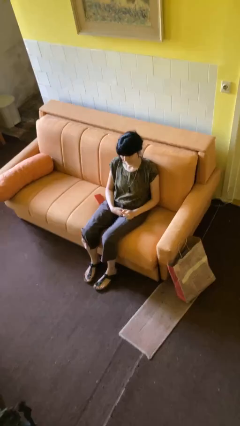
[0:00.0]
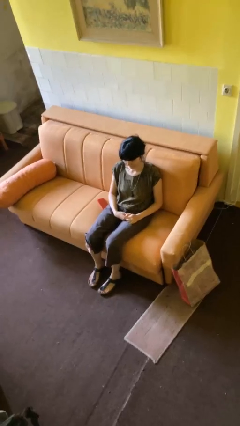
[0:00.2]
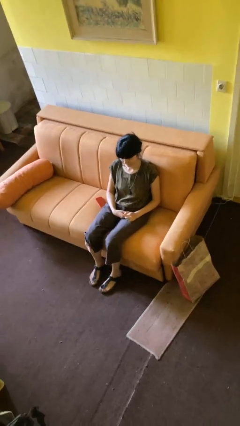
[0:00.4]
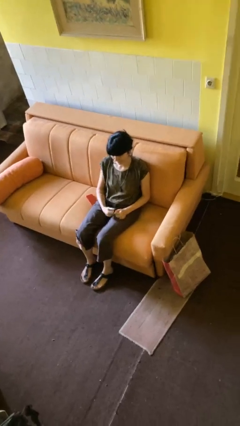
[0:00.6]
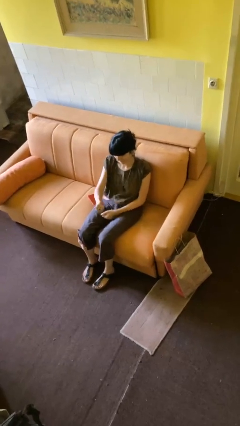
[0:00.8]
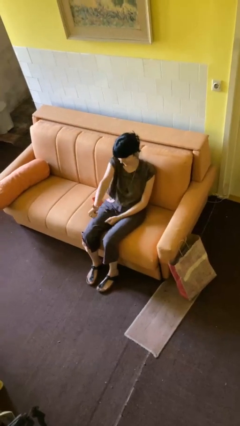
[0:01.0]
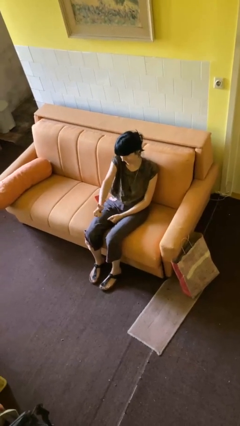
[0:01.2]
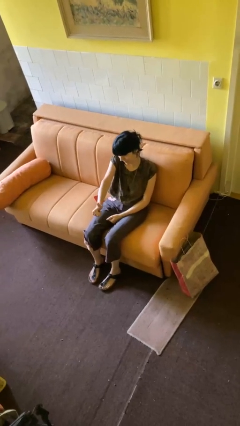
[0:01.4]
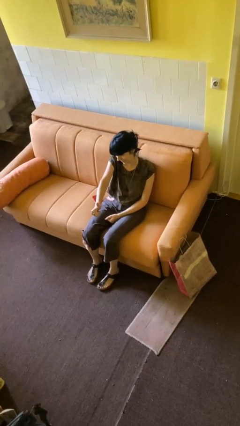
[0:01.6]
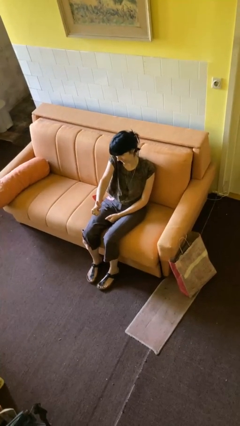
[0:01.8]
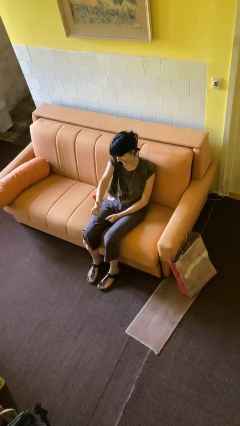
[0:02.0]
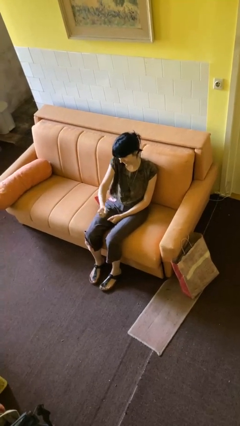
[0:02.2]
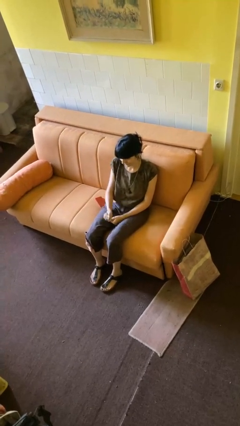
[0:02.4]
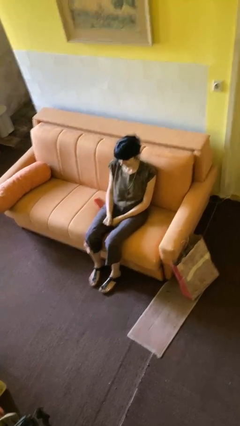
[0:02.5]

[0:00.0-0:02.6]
person gestures thumbs up

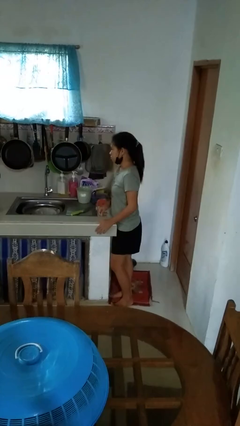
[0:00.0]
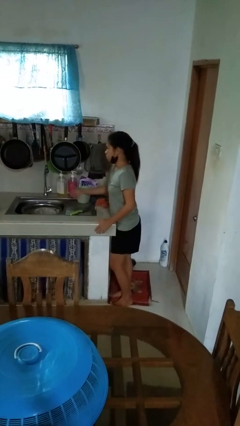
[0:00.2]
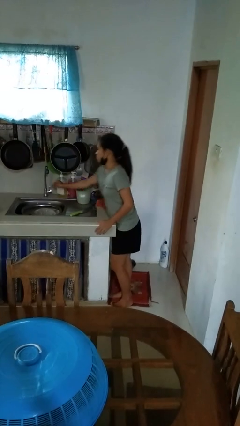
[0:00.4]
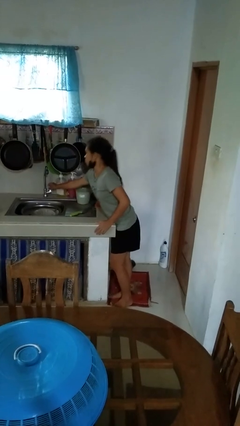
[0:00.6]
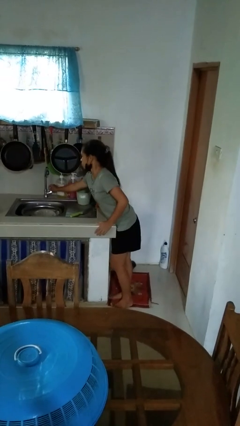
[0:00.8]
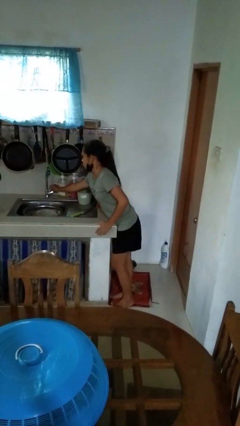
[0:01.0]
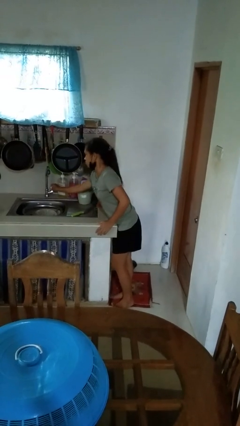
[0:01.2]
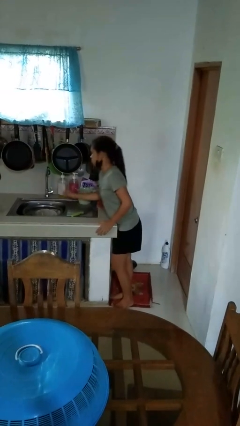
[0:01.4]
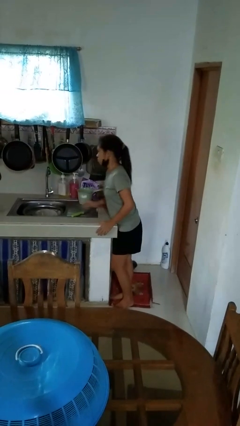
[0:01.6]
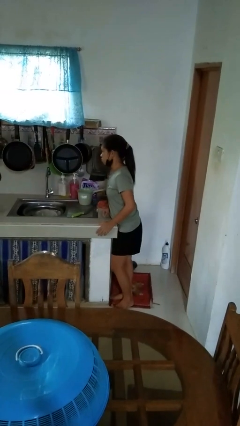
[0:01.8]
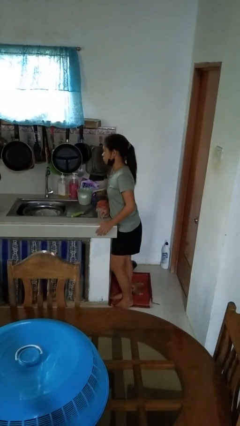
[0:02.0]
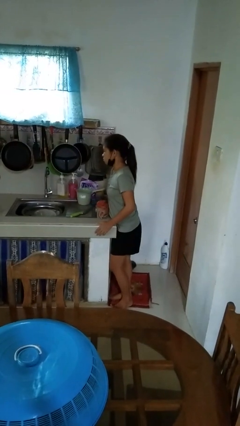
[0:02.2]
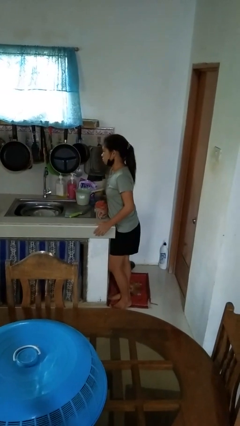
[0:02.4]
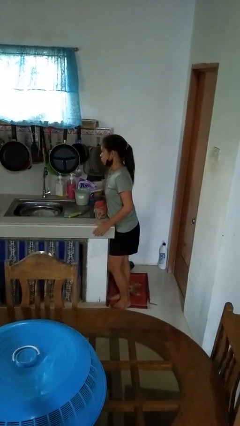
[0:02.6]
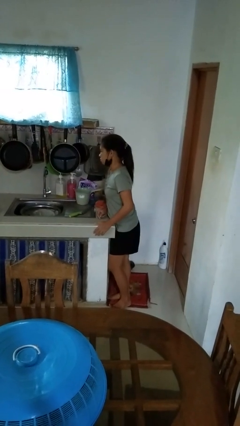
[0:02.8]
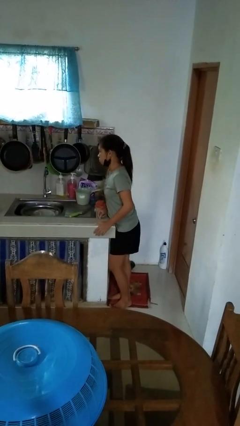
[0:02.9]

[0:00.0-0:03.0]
person turns on faucet

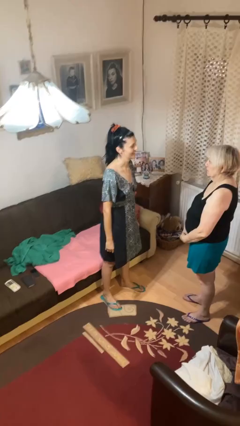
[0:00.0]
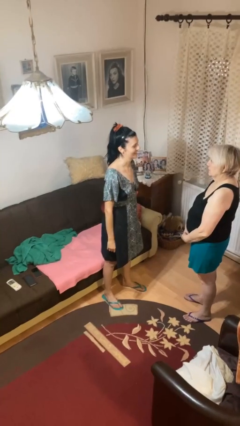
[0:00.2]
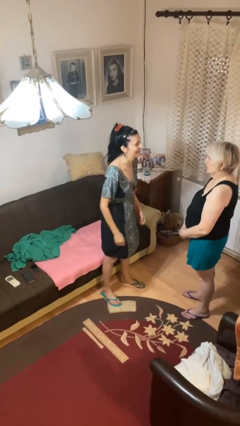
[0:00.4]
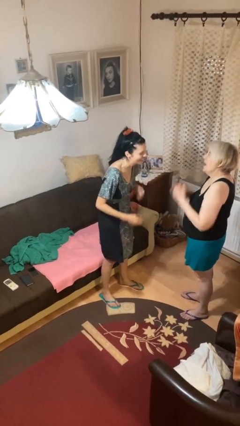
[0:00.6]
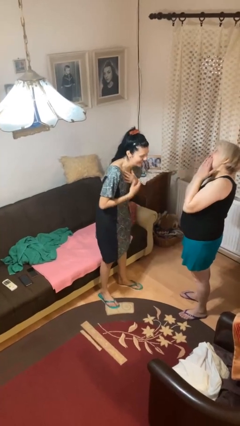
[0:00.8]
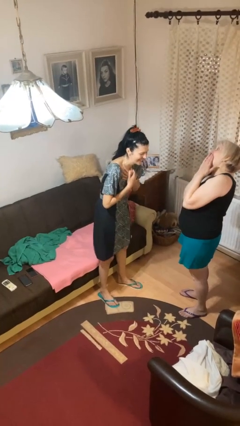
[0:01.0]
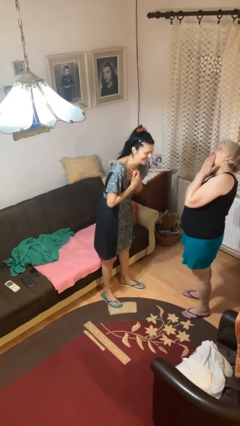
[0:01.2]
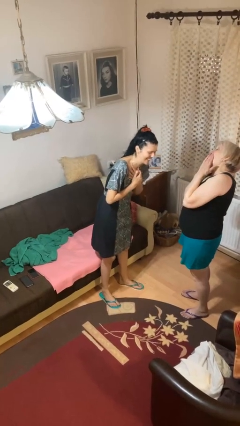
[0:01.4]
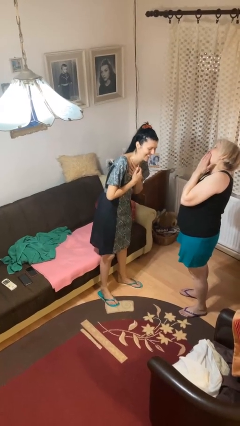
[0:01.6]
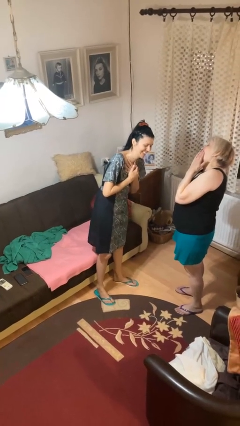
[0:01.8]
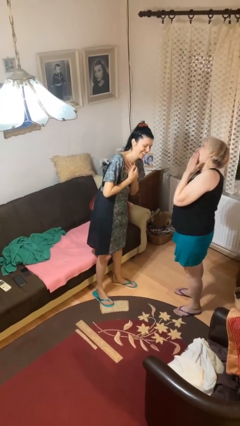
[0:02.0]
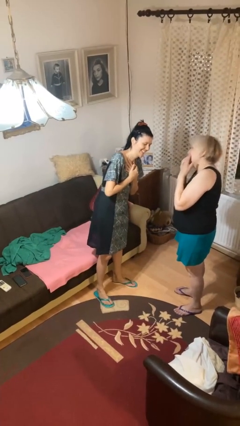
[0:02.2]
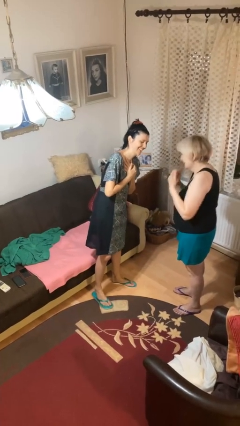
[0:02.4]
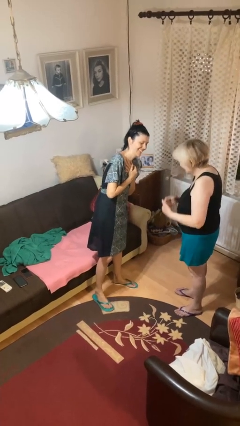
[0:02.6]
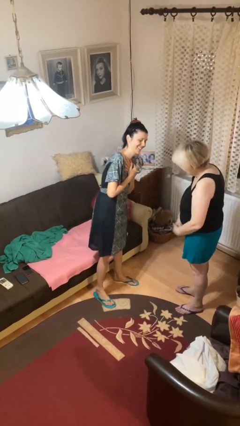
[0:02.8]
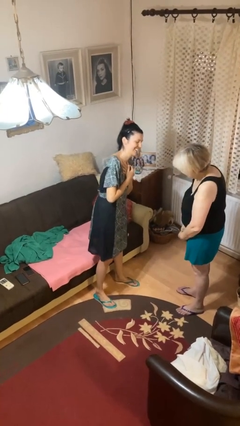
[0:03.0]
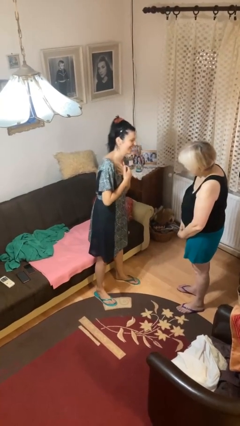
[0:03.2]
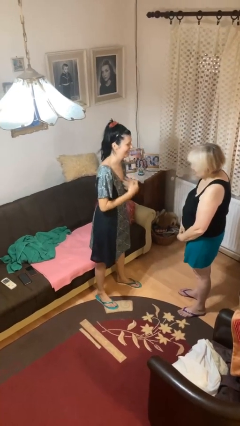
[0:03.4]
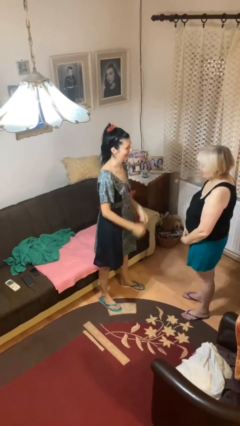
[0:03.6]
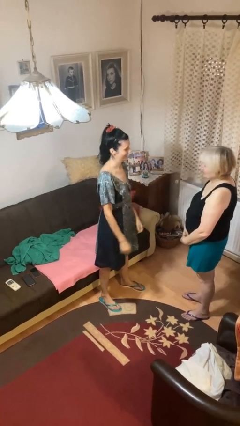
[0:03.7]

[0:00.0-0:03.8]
person laughs with person

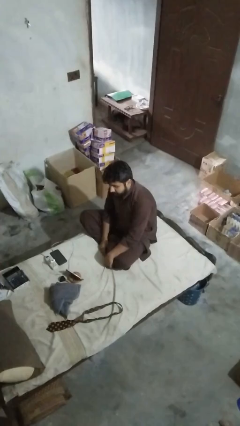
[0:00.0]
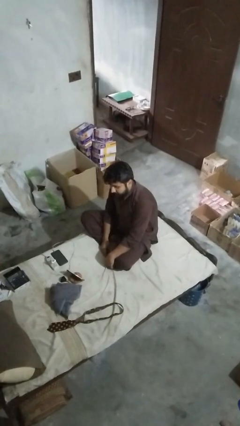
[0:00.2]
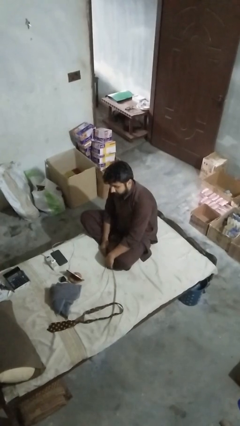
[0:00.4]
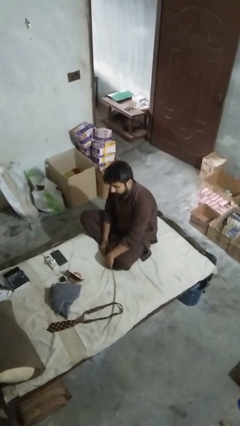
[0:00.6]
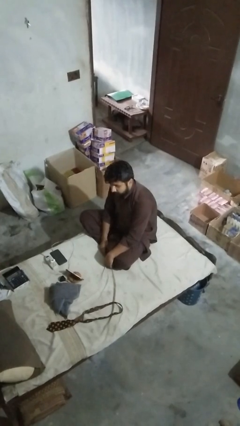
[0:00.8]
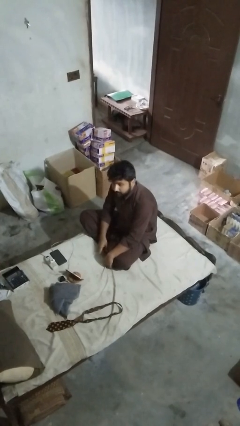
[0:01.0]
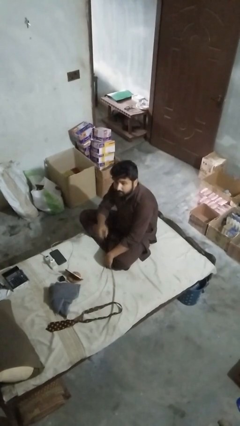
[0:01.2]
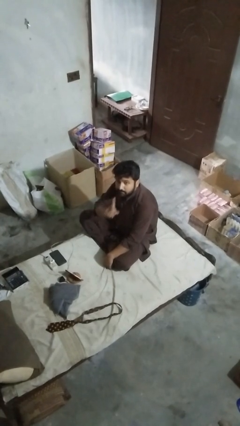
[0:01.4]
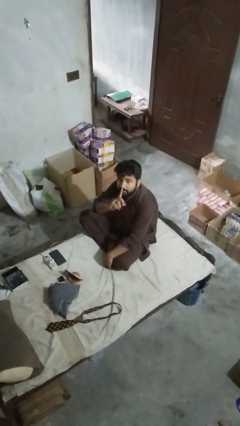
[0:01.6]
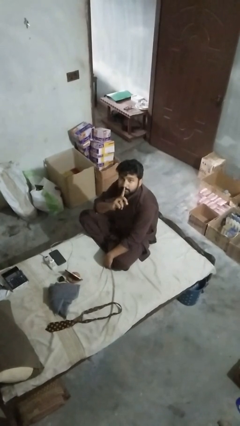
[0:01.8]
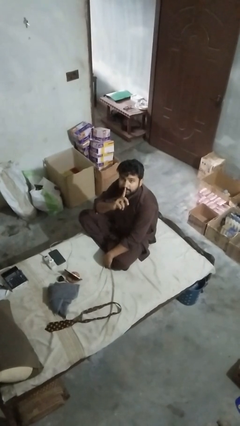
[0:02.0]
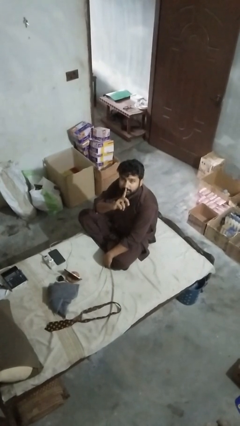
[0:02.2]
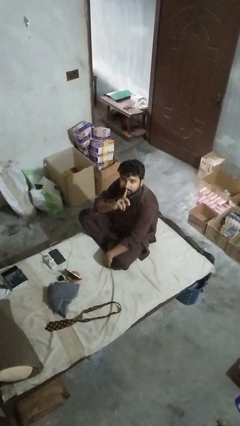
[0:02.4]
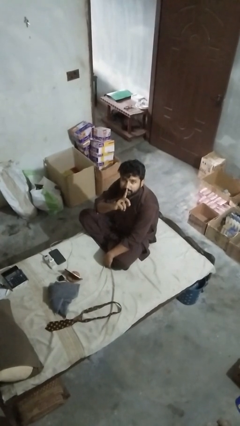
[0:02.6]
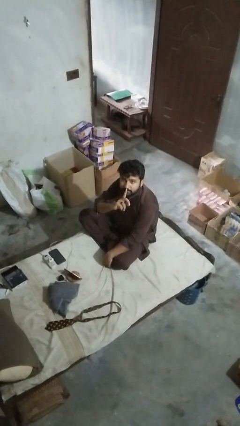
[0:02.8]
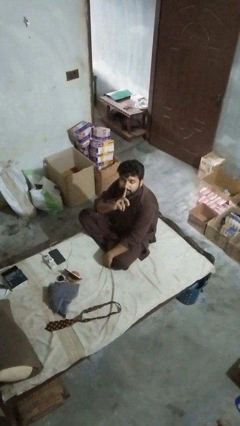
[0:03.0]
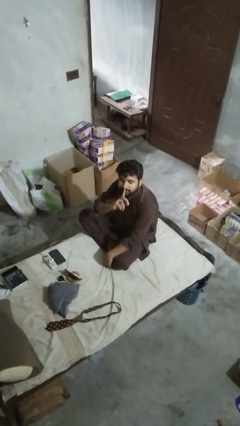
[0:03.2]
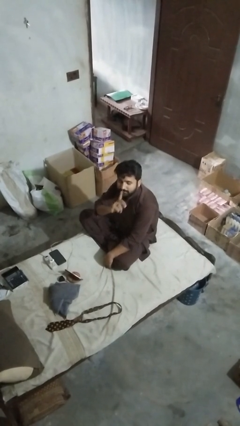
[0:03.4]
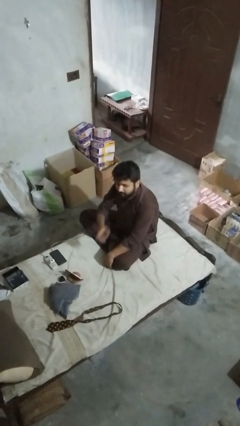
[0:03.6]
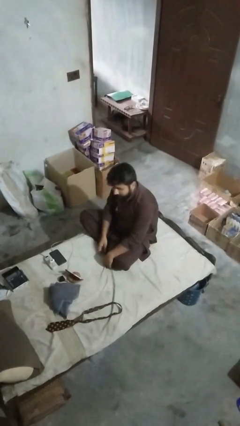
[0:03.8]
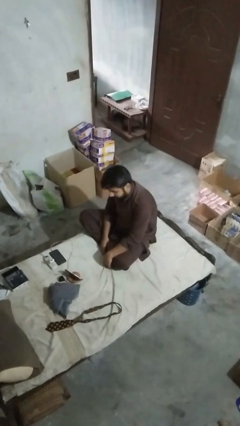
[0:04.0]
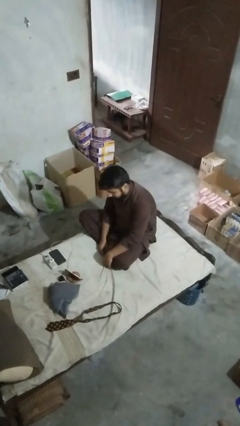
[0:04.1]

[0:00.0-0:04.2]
person gestures be quiet

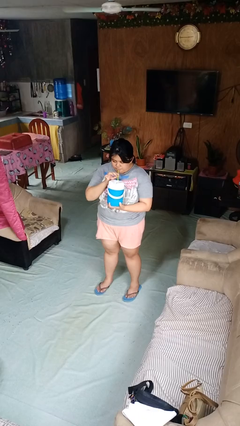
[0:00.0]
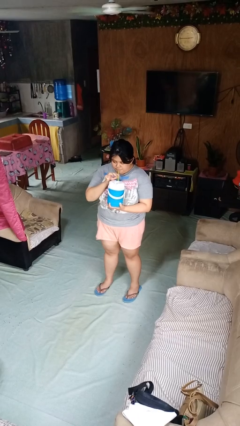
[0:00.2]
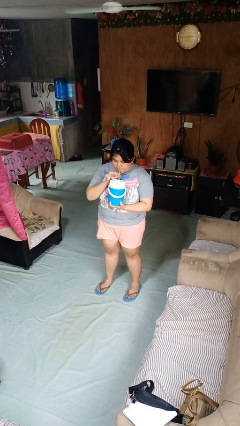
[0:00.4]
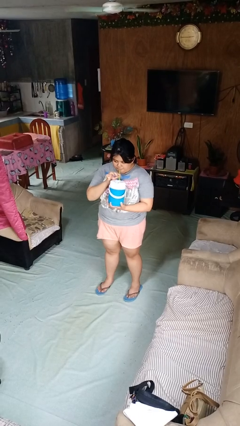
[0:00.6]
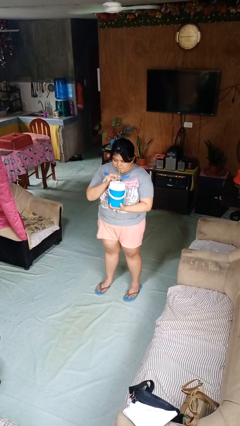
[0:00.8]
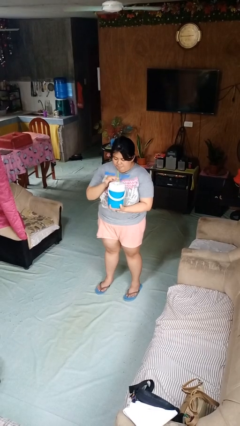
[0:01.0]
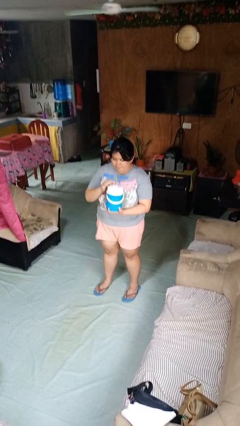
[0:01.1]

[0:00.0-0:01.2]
person drinks from straw

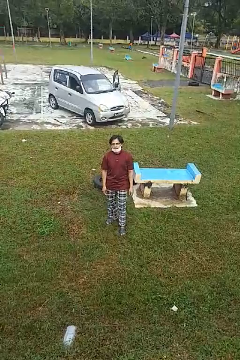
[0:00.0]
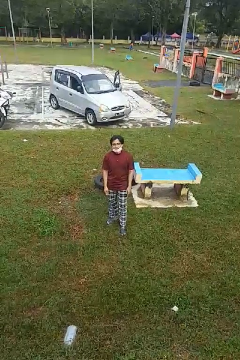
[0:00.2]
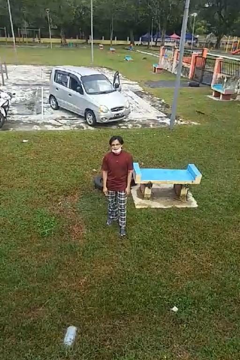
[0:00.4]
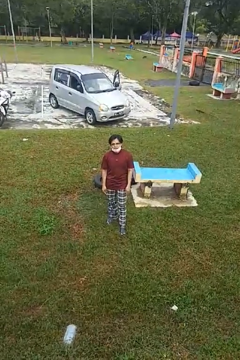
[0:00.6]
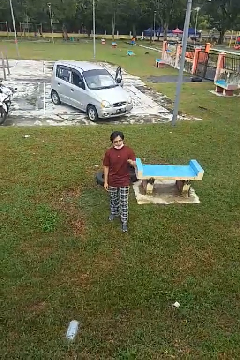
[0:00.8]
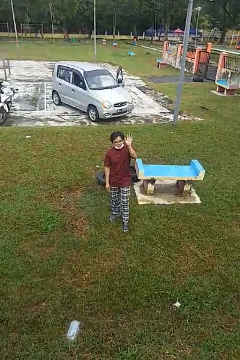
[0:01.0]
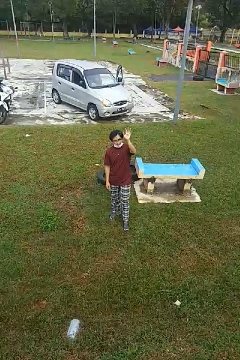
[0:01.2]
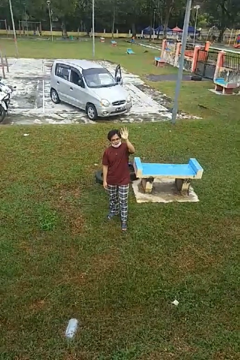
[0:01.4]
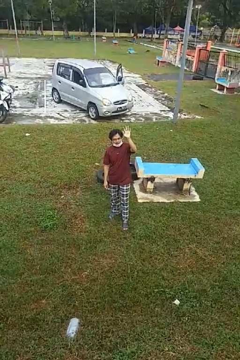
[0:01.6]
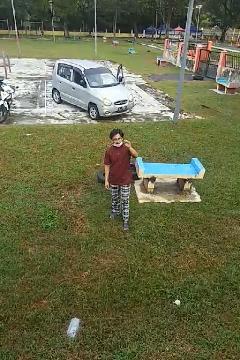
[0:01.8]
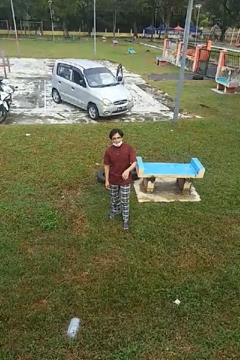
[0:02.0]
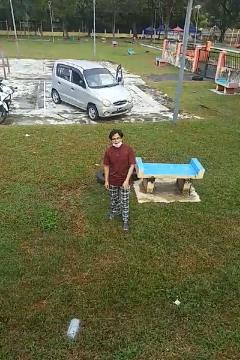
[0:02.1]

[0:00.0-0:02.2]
person waves at person

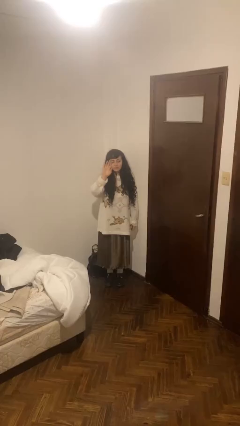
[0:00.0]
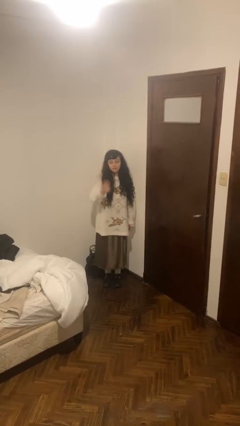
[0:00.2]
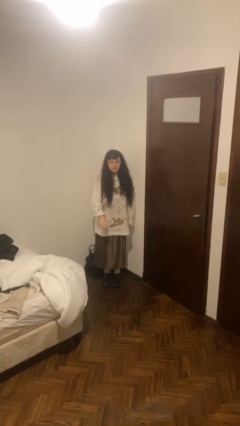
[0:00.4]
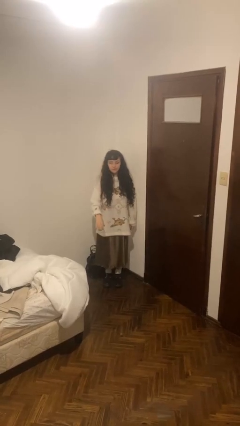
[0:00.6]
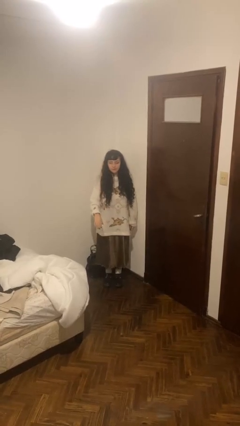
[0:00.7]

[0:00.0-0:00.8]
person gestures swipe down

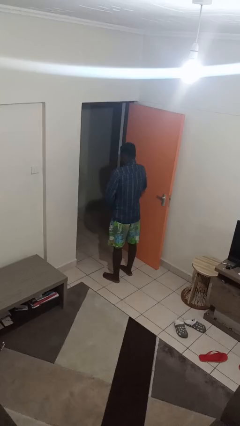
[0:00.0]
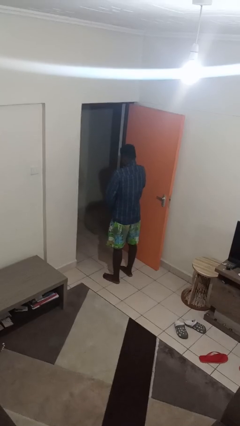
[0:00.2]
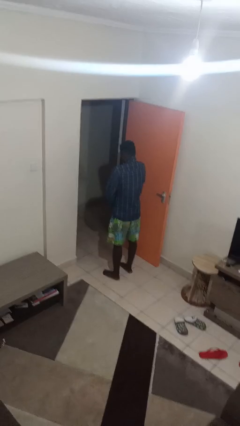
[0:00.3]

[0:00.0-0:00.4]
person takes off jacket
